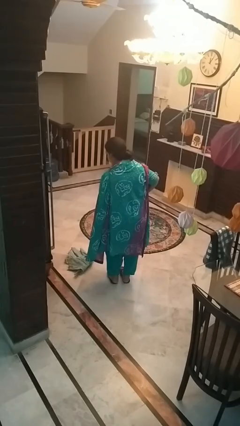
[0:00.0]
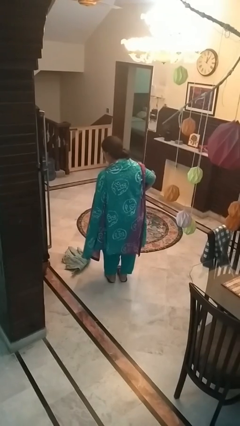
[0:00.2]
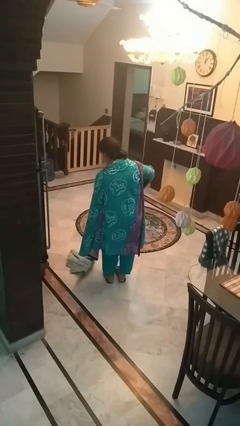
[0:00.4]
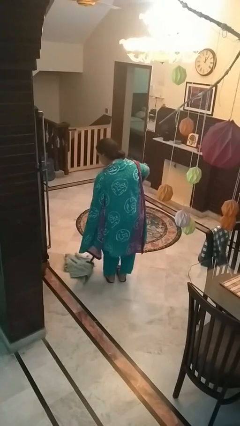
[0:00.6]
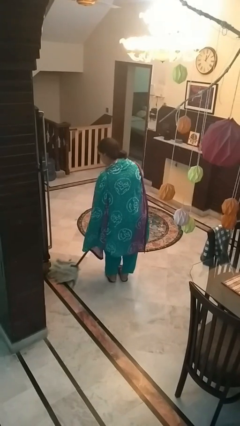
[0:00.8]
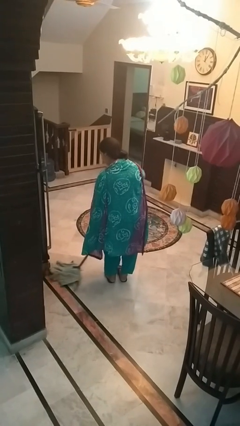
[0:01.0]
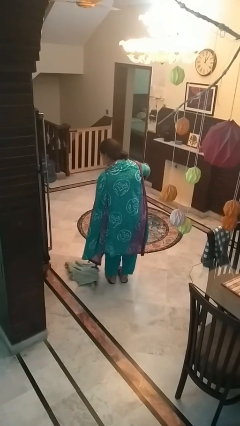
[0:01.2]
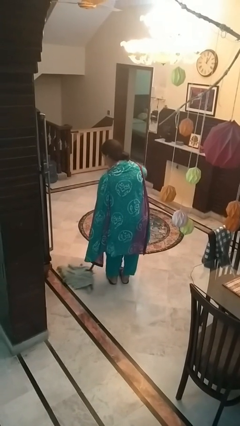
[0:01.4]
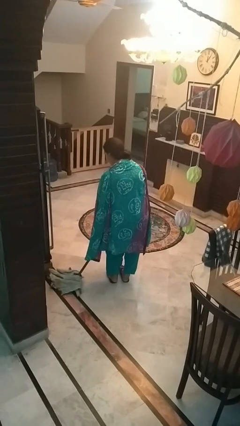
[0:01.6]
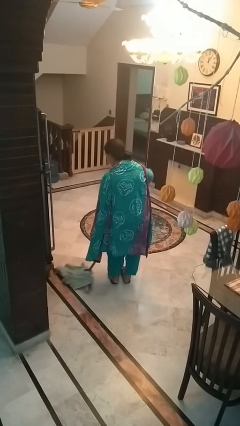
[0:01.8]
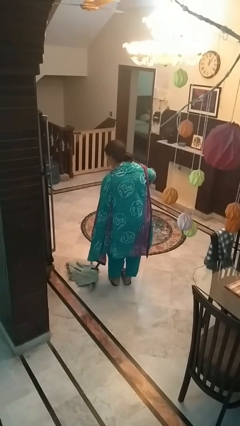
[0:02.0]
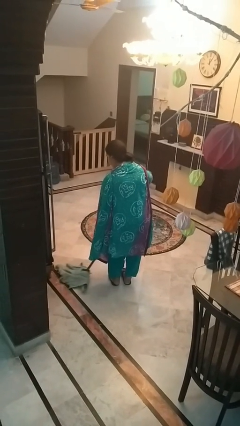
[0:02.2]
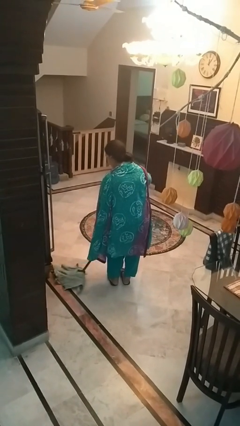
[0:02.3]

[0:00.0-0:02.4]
person mops

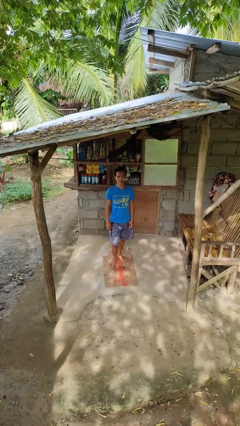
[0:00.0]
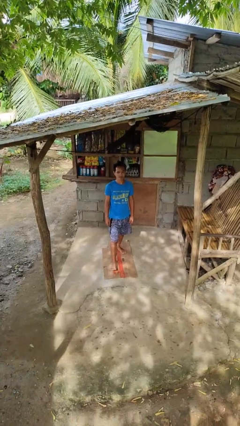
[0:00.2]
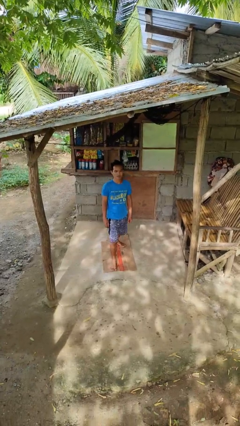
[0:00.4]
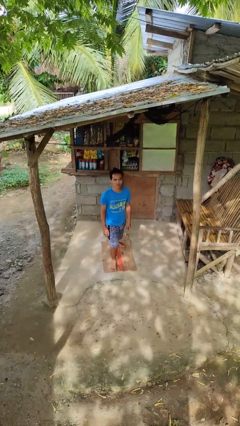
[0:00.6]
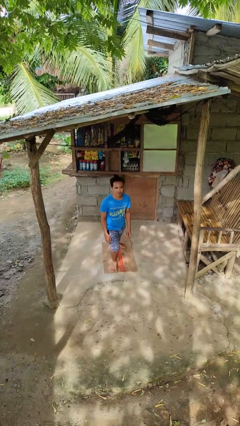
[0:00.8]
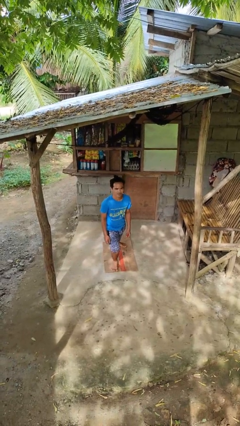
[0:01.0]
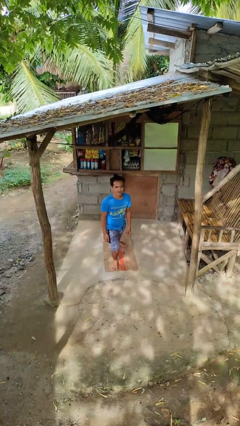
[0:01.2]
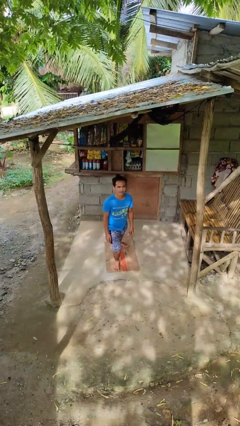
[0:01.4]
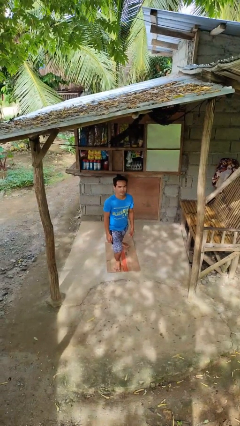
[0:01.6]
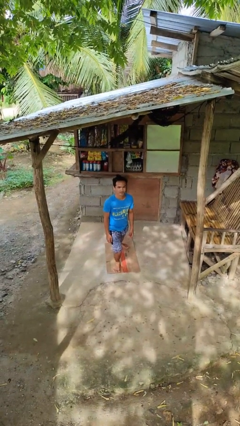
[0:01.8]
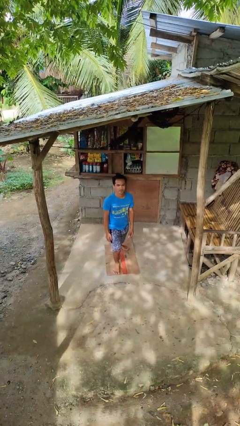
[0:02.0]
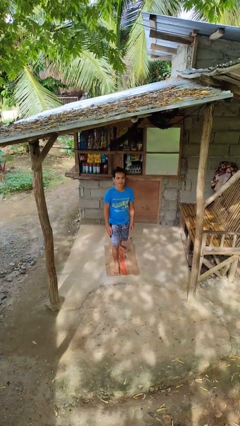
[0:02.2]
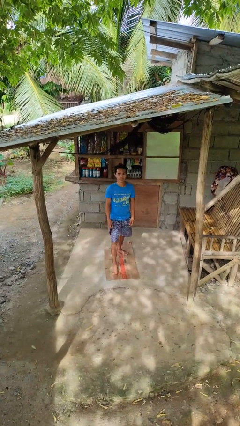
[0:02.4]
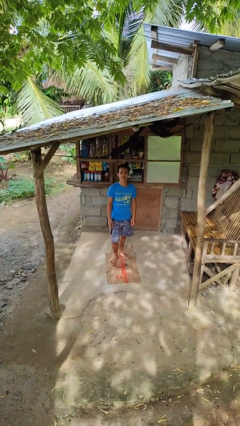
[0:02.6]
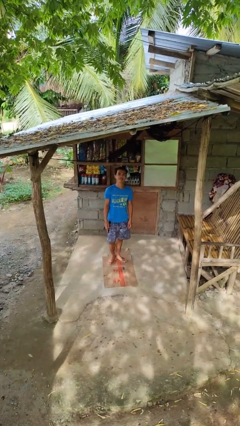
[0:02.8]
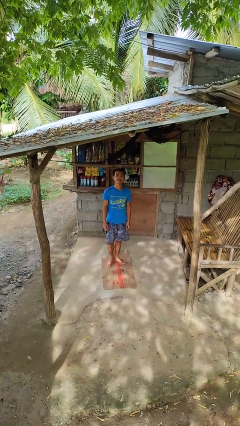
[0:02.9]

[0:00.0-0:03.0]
person exercises with lunges

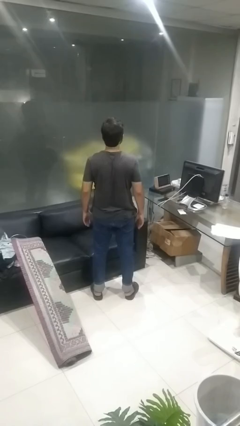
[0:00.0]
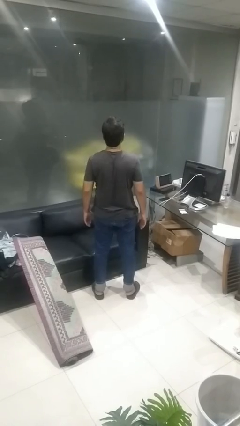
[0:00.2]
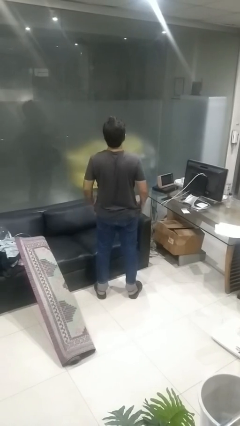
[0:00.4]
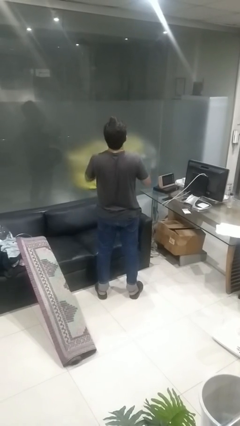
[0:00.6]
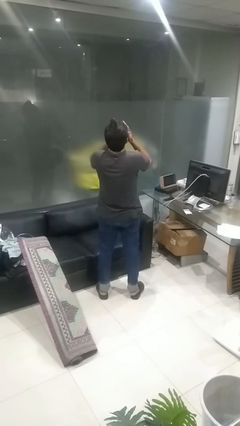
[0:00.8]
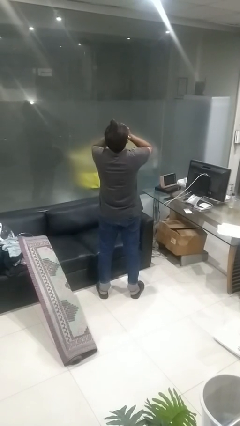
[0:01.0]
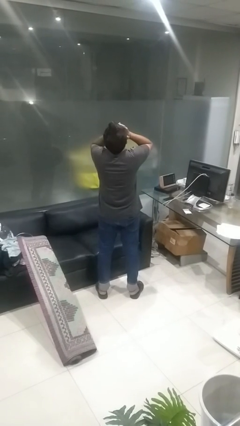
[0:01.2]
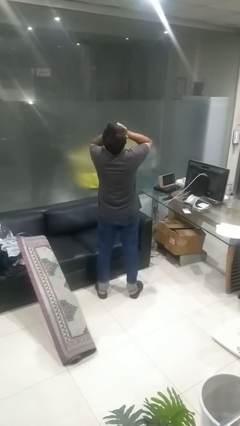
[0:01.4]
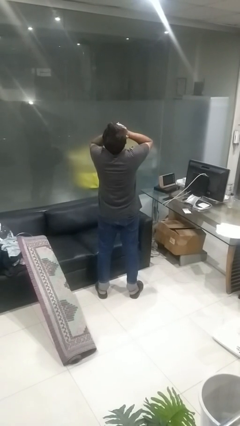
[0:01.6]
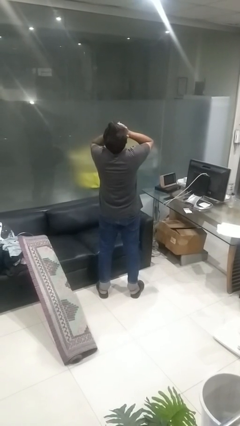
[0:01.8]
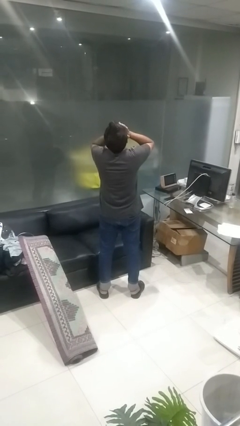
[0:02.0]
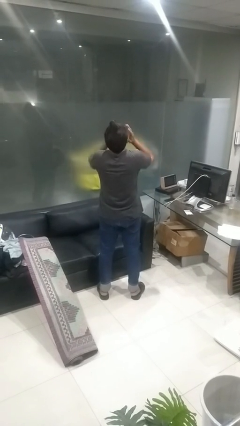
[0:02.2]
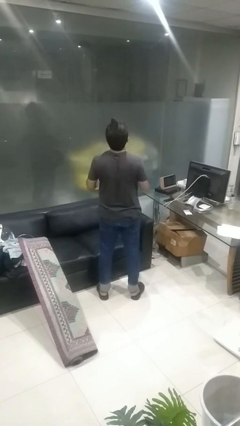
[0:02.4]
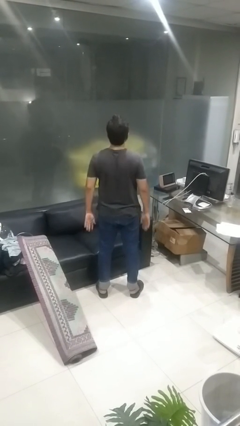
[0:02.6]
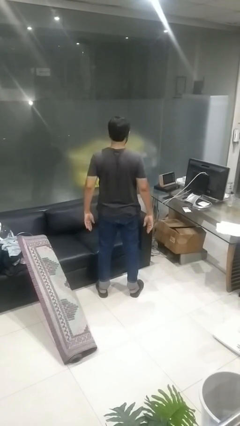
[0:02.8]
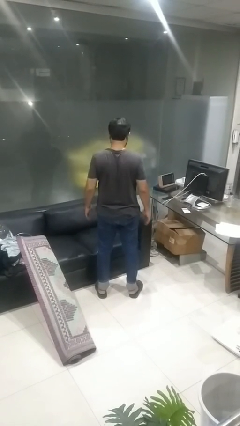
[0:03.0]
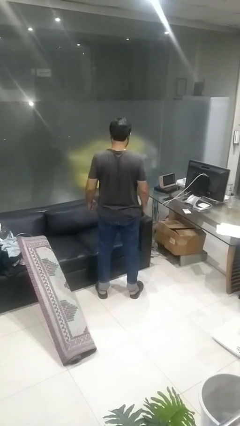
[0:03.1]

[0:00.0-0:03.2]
person covers face with hands

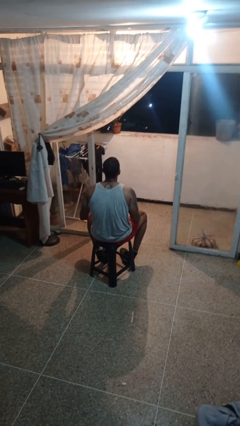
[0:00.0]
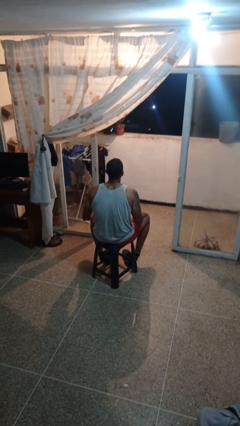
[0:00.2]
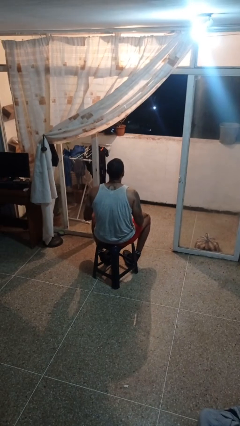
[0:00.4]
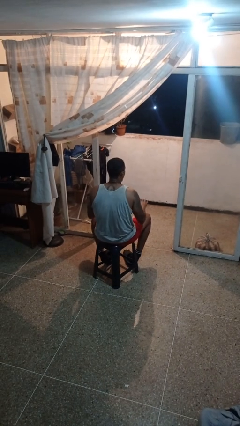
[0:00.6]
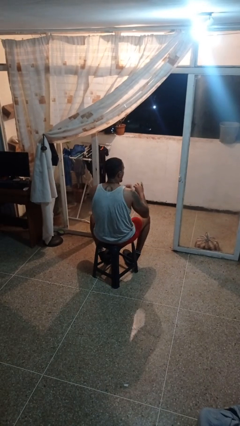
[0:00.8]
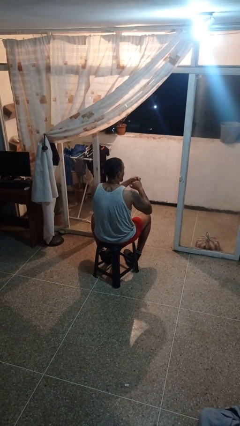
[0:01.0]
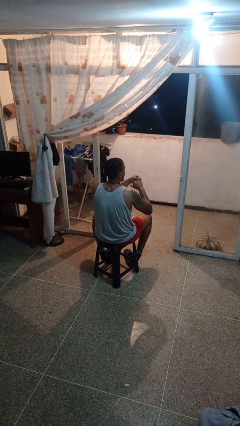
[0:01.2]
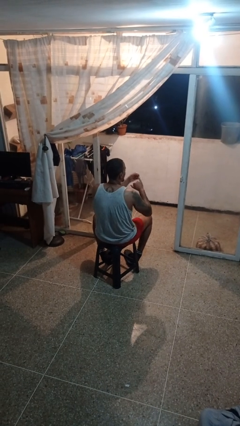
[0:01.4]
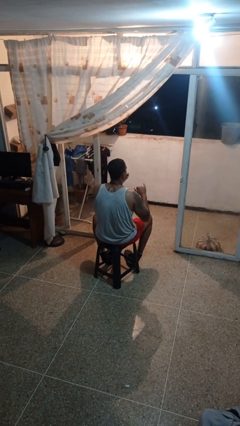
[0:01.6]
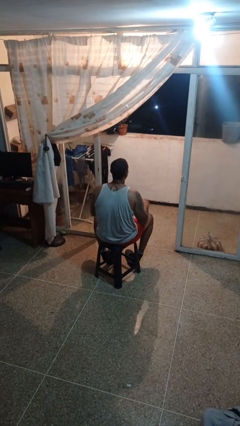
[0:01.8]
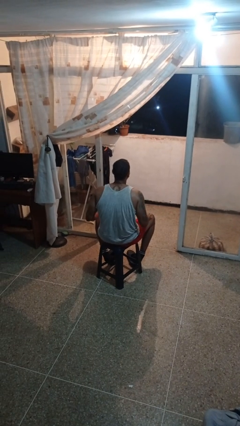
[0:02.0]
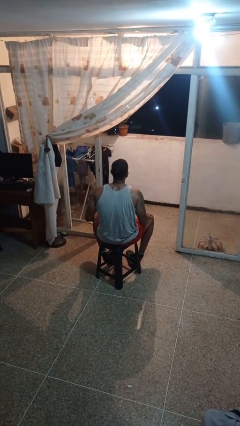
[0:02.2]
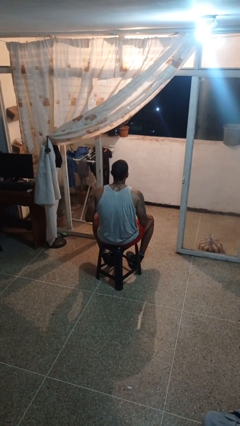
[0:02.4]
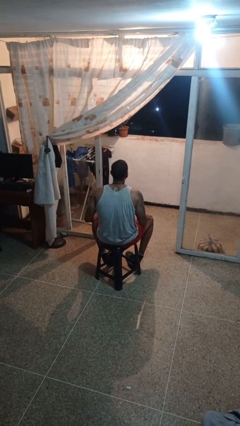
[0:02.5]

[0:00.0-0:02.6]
person takes off ring

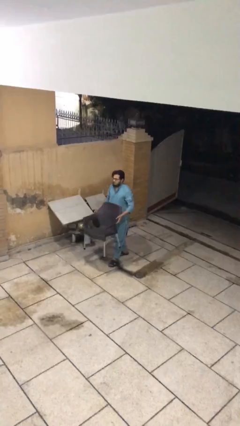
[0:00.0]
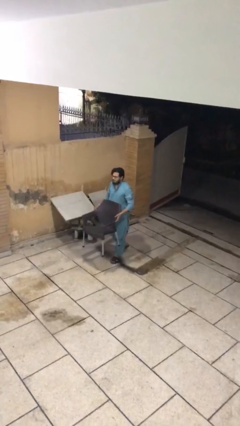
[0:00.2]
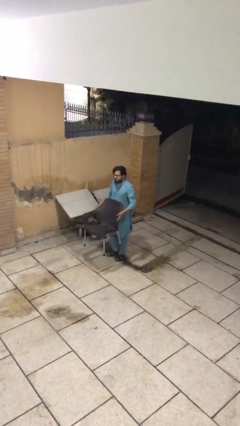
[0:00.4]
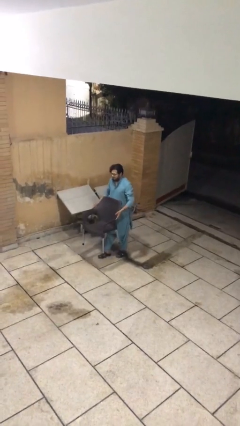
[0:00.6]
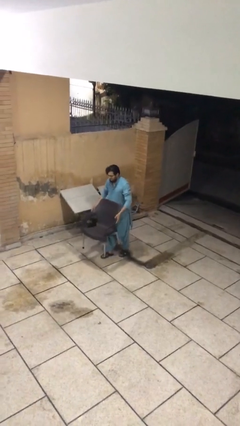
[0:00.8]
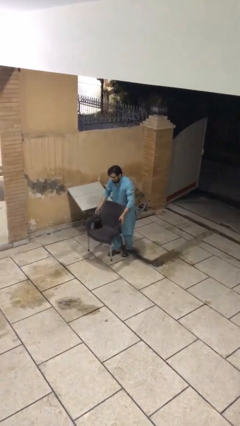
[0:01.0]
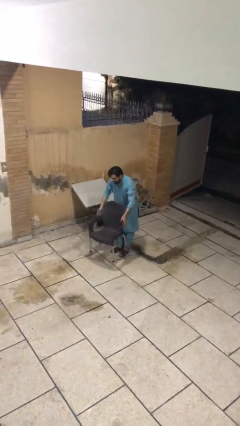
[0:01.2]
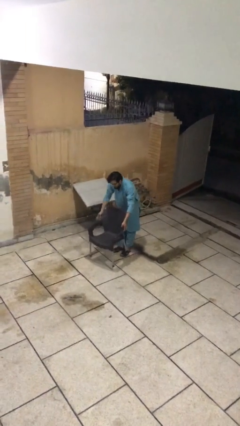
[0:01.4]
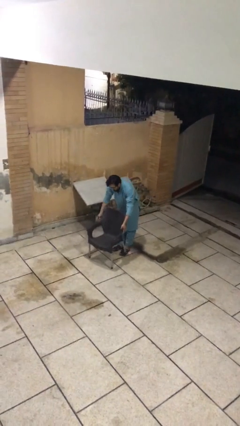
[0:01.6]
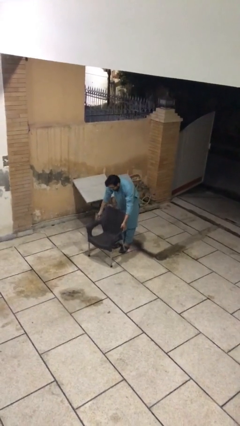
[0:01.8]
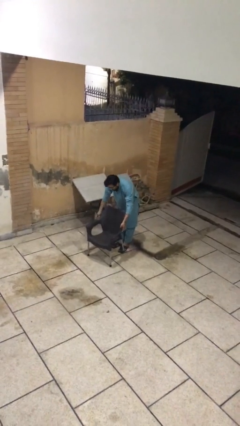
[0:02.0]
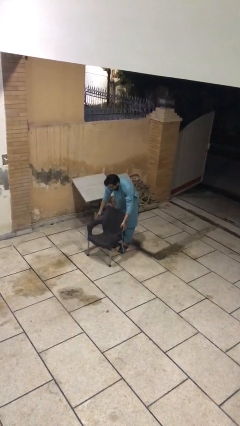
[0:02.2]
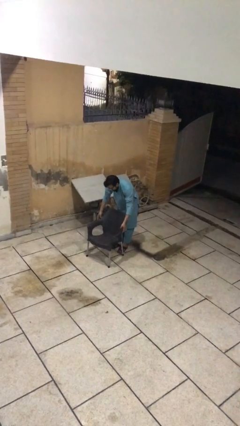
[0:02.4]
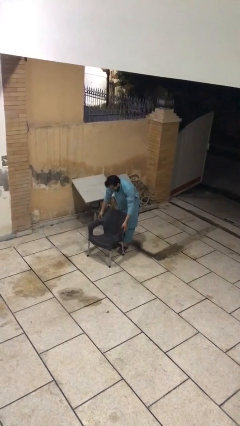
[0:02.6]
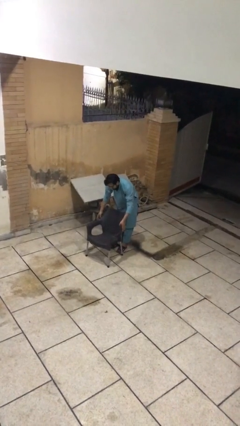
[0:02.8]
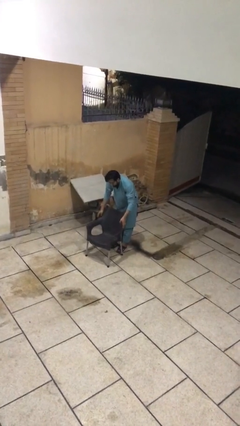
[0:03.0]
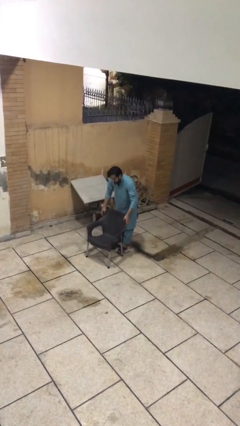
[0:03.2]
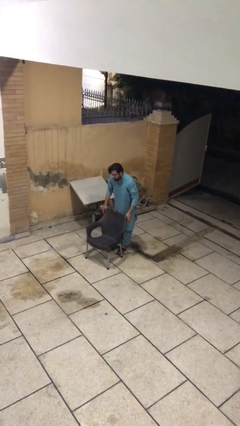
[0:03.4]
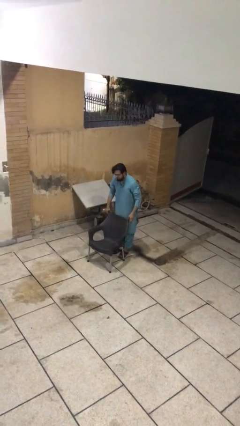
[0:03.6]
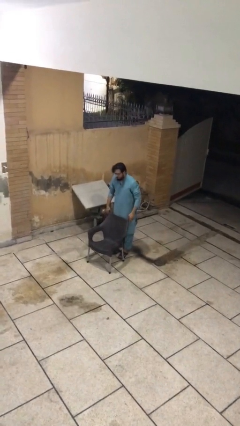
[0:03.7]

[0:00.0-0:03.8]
person puts down object on floor

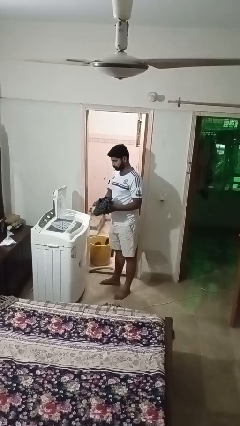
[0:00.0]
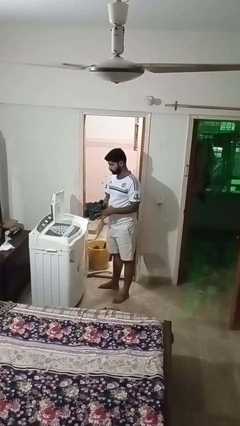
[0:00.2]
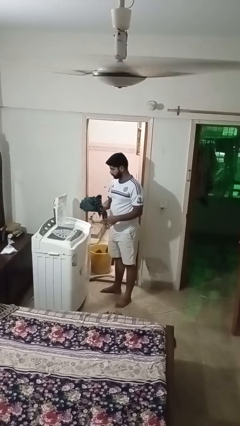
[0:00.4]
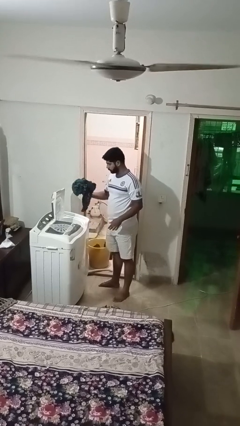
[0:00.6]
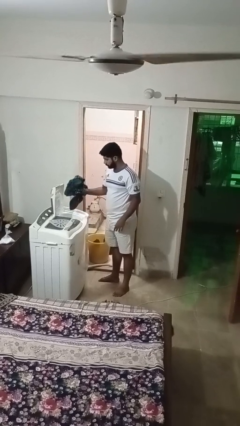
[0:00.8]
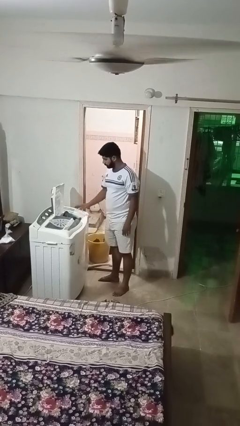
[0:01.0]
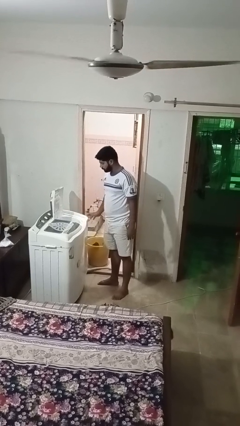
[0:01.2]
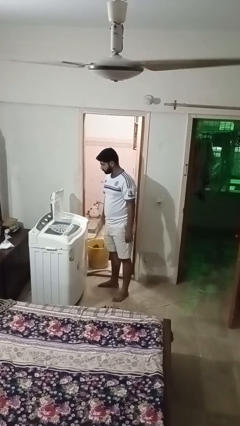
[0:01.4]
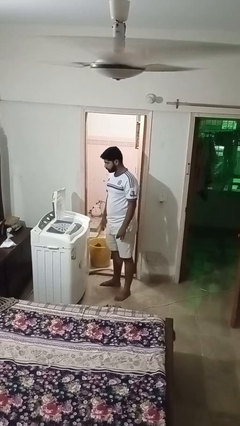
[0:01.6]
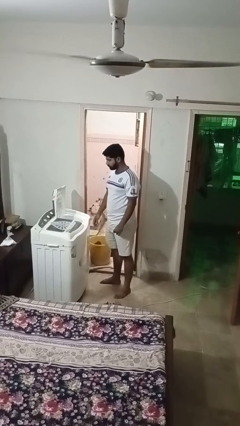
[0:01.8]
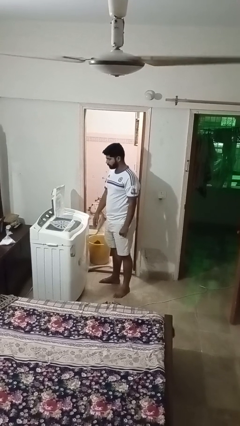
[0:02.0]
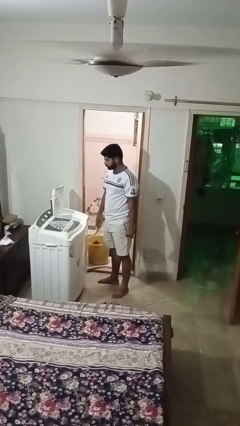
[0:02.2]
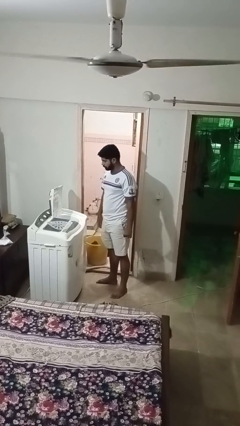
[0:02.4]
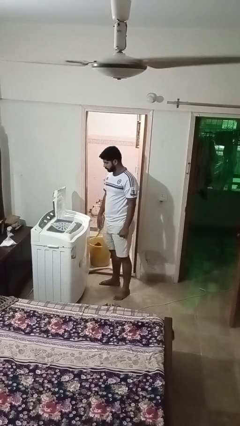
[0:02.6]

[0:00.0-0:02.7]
person loads dryer

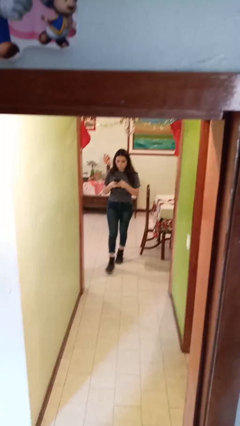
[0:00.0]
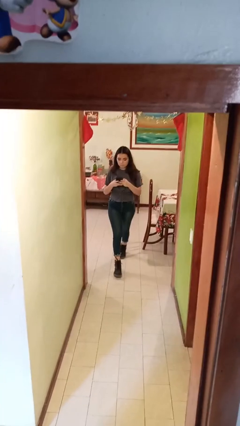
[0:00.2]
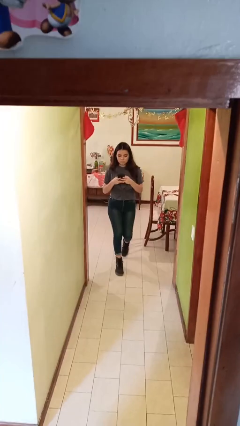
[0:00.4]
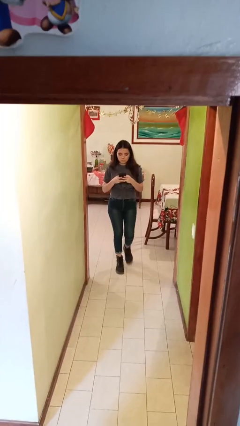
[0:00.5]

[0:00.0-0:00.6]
person enters scene through structure
